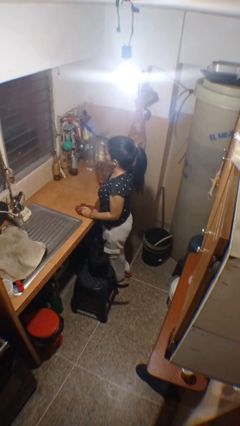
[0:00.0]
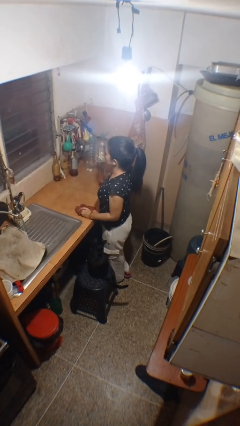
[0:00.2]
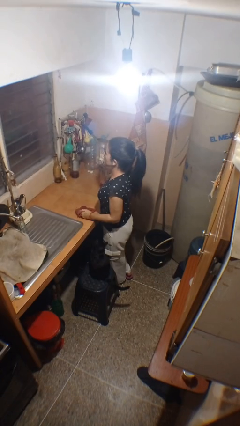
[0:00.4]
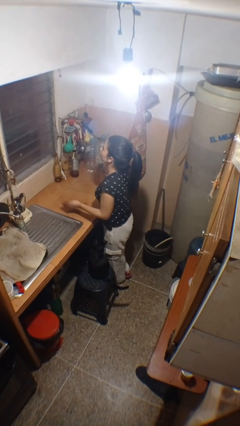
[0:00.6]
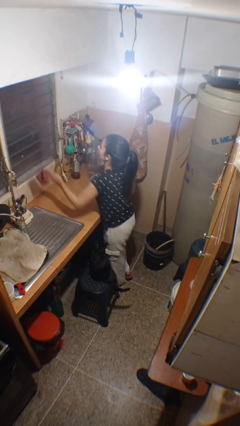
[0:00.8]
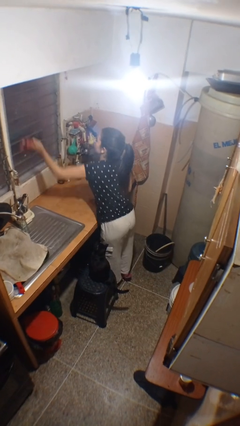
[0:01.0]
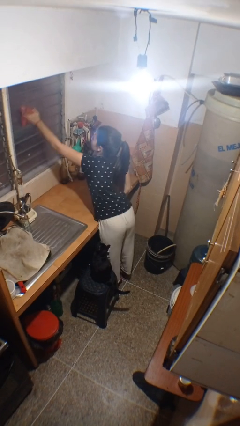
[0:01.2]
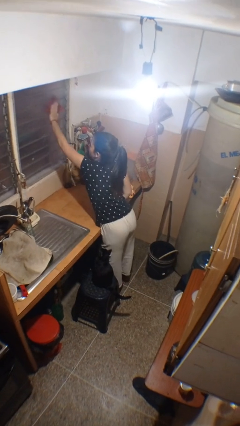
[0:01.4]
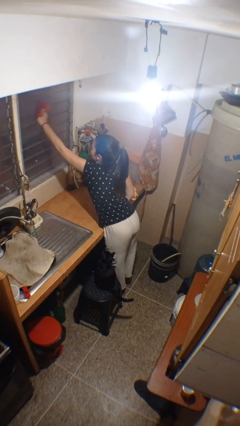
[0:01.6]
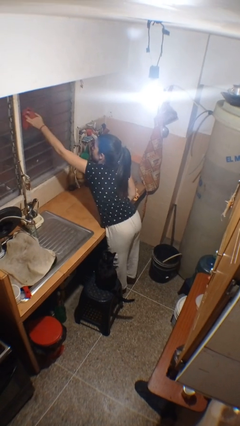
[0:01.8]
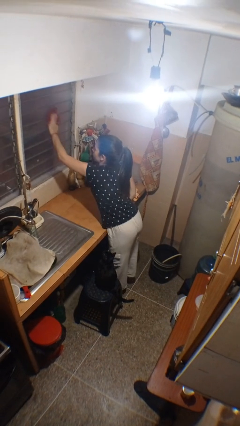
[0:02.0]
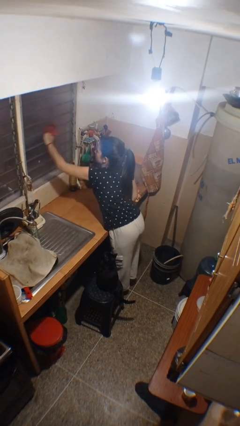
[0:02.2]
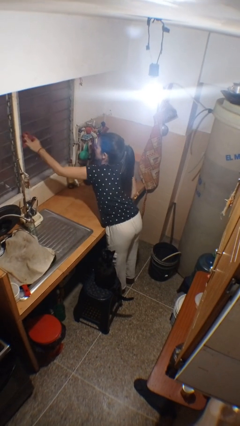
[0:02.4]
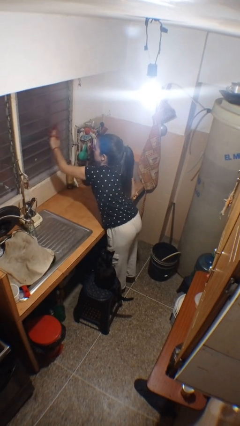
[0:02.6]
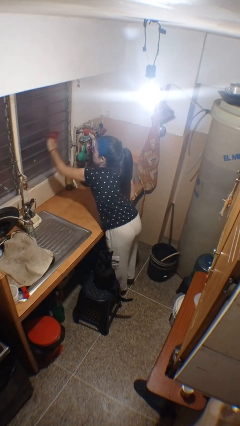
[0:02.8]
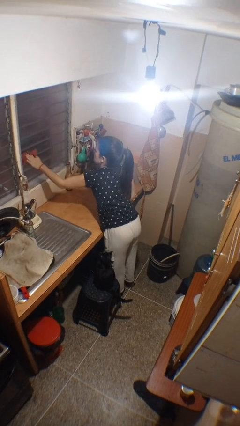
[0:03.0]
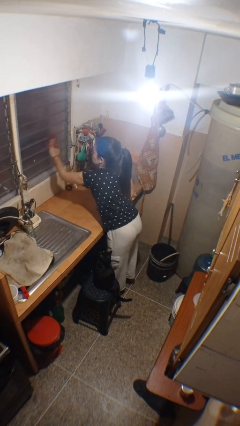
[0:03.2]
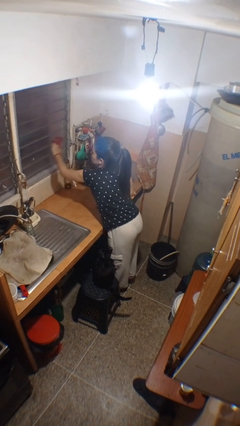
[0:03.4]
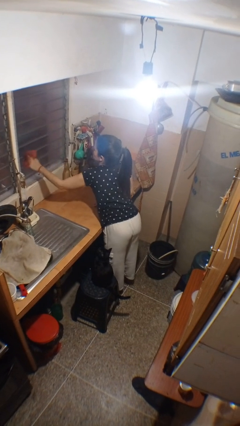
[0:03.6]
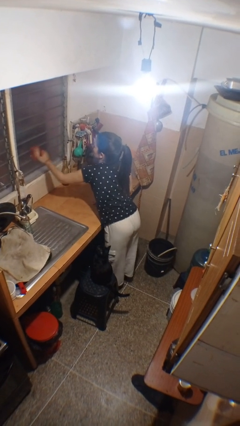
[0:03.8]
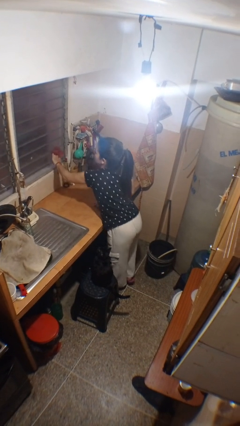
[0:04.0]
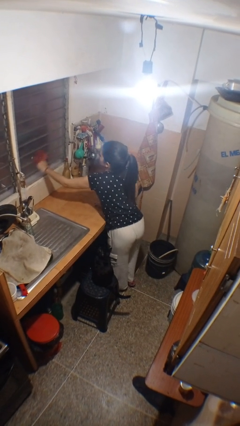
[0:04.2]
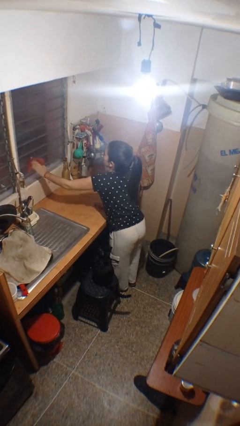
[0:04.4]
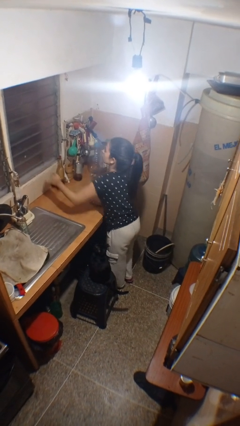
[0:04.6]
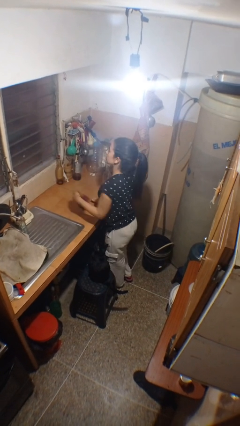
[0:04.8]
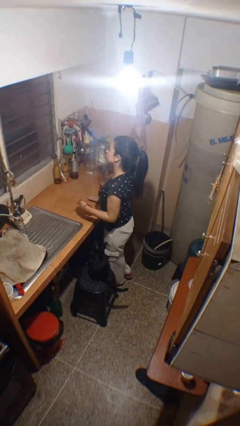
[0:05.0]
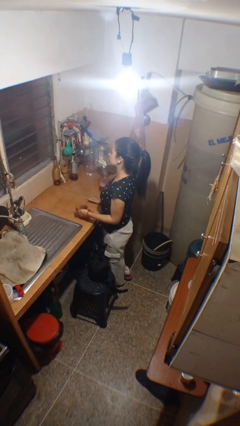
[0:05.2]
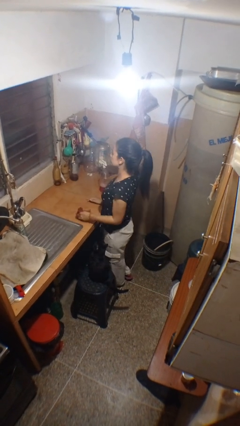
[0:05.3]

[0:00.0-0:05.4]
person washes window

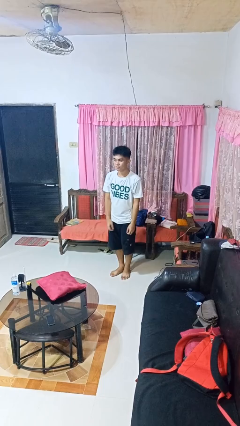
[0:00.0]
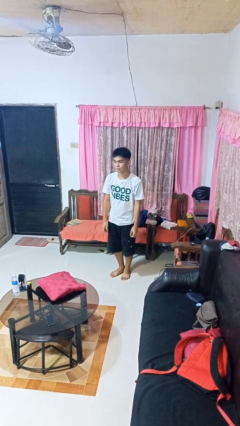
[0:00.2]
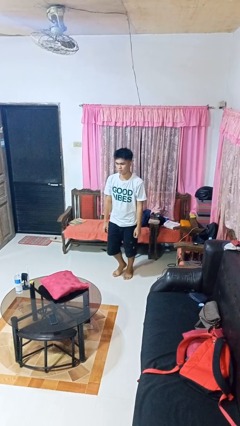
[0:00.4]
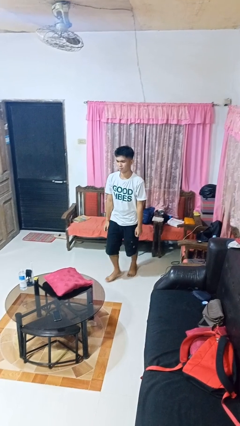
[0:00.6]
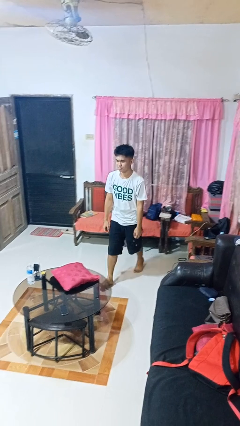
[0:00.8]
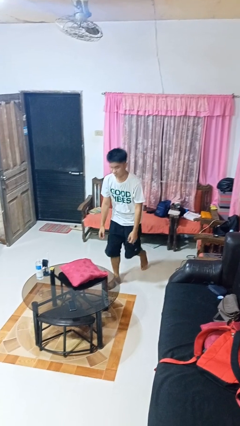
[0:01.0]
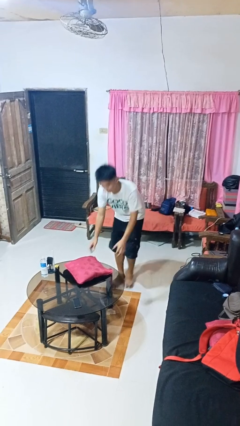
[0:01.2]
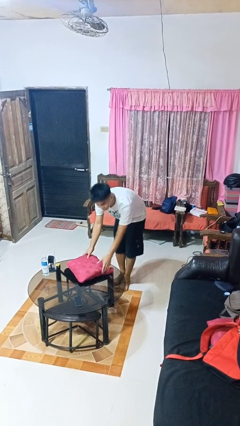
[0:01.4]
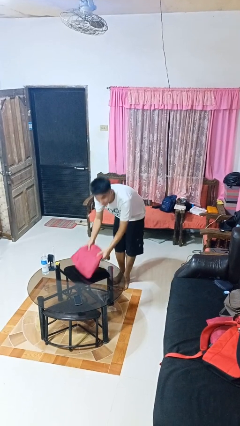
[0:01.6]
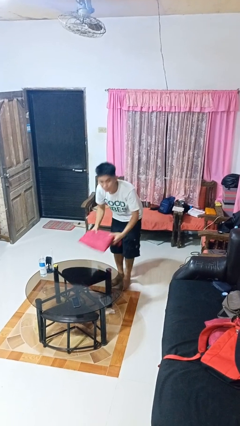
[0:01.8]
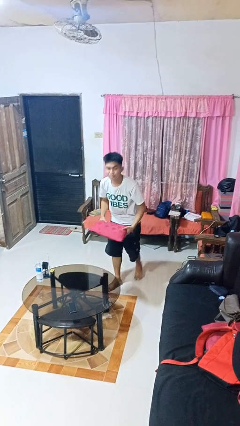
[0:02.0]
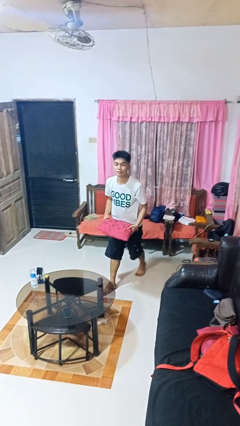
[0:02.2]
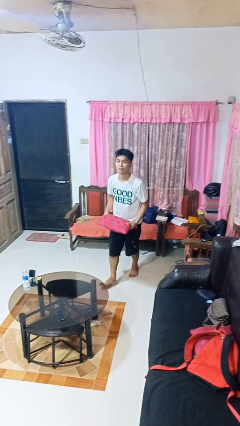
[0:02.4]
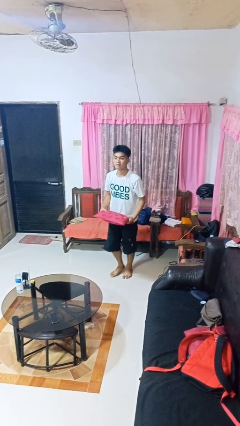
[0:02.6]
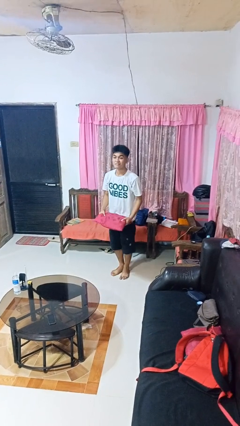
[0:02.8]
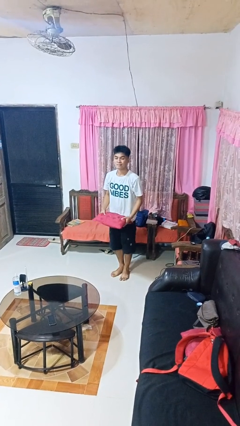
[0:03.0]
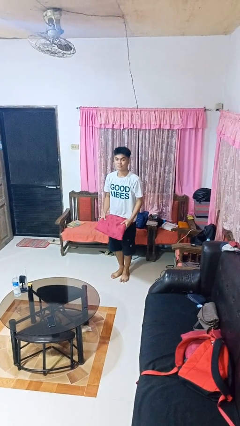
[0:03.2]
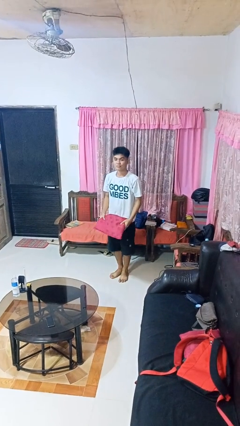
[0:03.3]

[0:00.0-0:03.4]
person picks up object from table

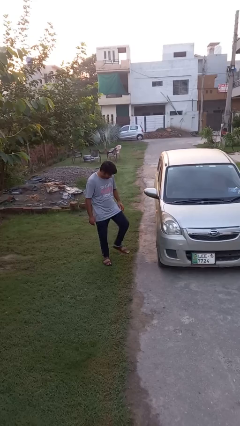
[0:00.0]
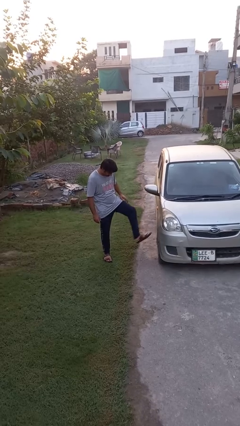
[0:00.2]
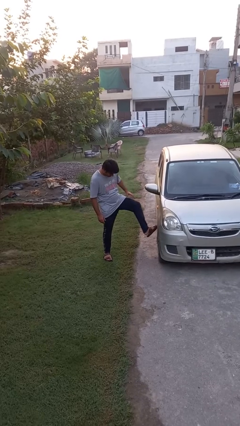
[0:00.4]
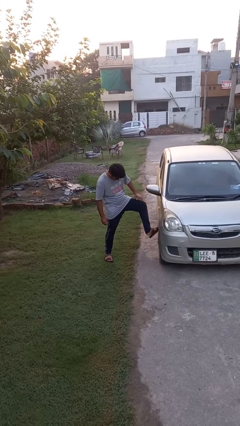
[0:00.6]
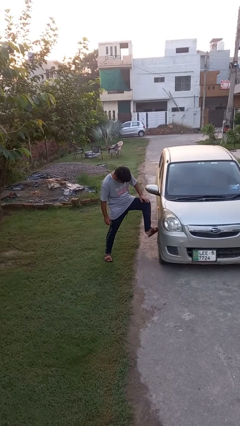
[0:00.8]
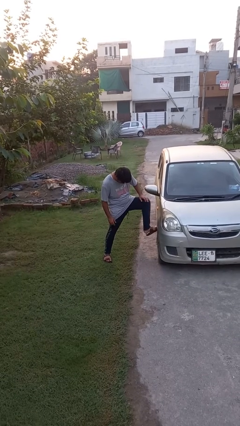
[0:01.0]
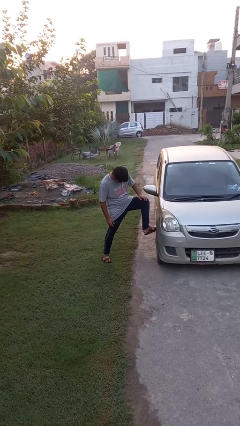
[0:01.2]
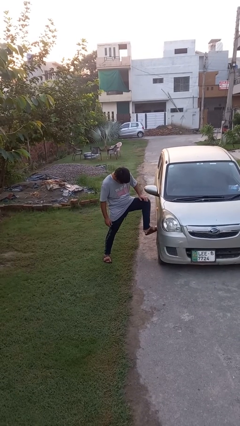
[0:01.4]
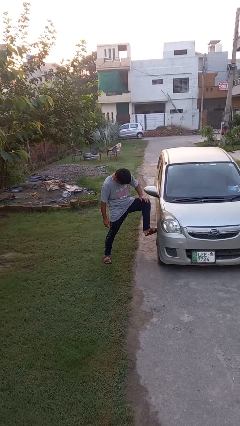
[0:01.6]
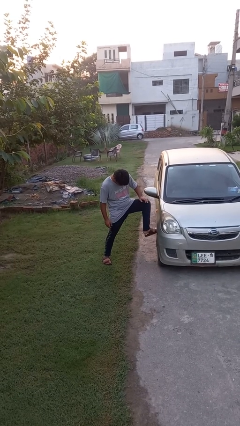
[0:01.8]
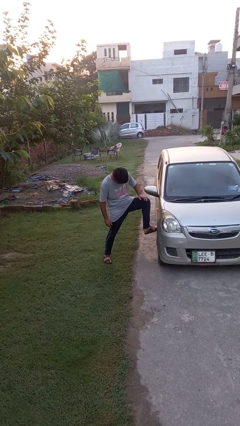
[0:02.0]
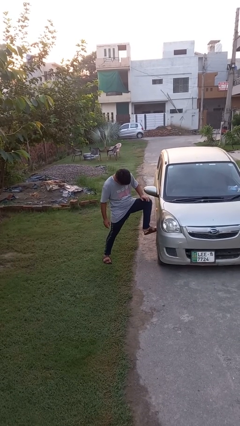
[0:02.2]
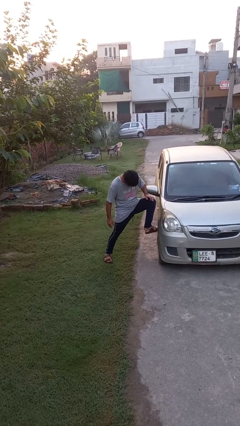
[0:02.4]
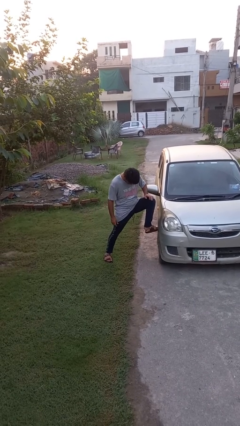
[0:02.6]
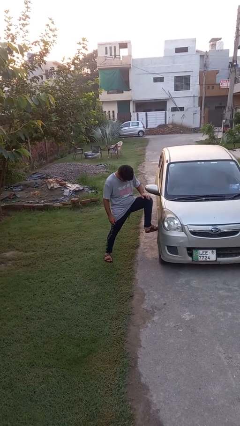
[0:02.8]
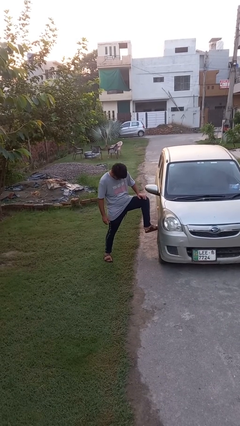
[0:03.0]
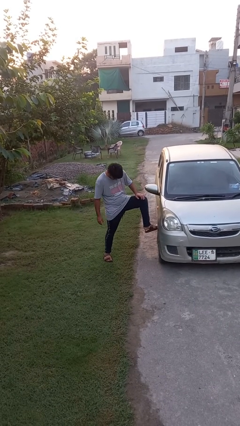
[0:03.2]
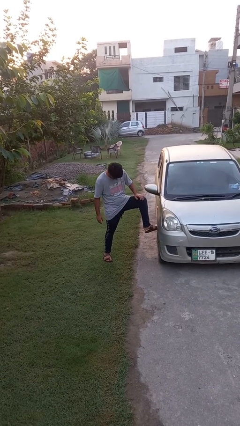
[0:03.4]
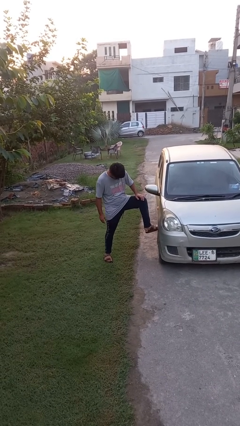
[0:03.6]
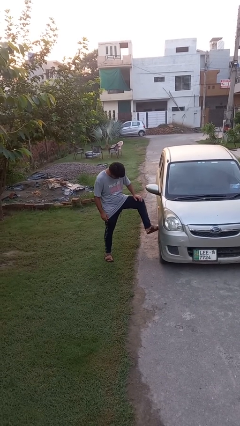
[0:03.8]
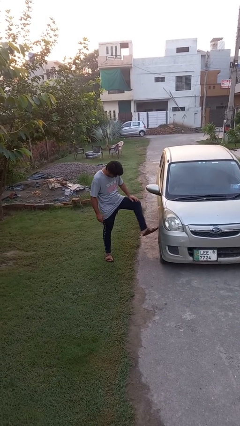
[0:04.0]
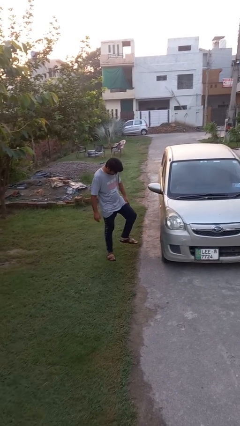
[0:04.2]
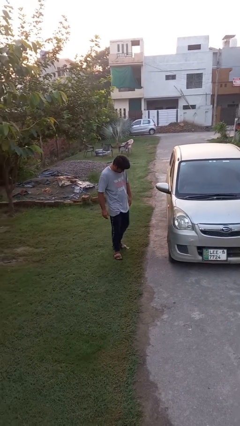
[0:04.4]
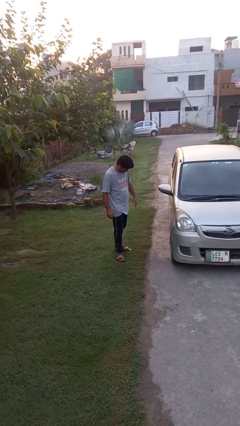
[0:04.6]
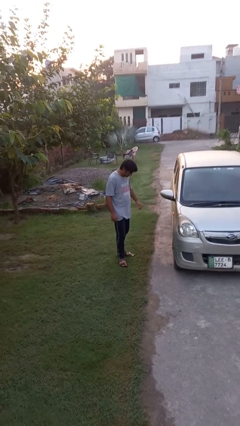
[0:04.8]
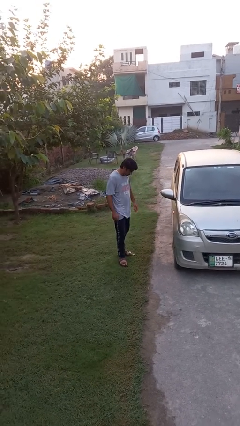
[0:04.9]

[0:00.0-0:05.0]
person kicks car tires

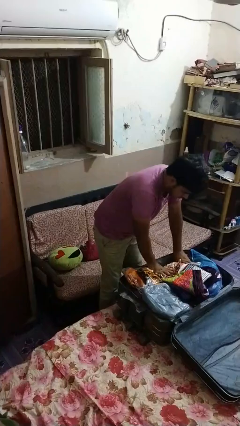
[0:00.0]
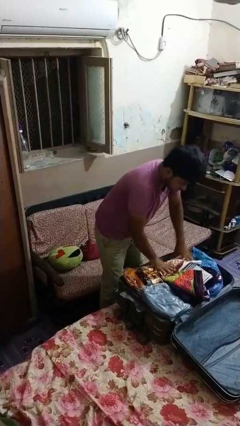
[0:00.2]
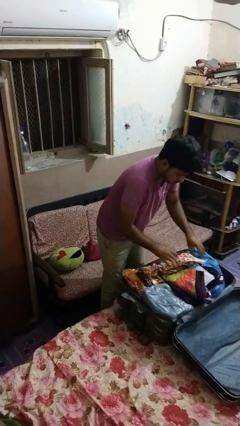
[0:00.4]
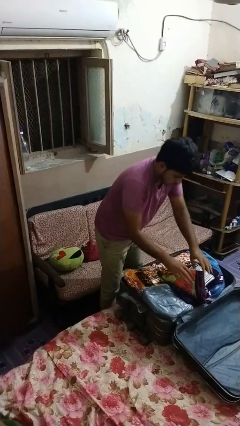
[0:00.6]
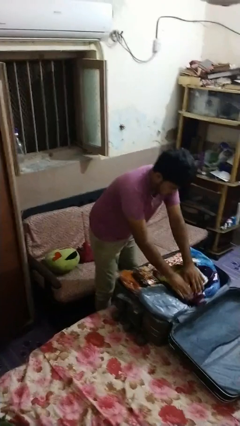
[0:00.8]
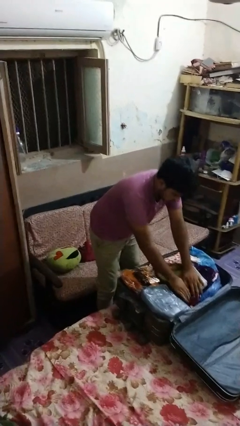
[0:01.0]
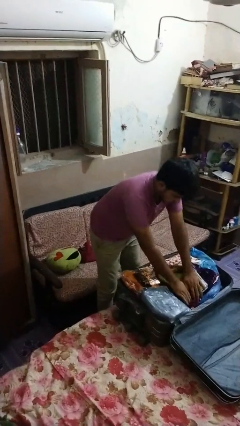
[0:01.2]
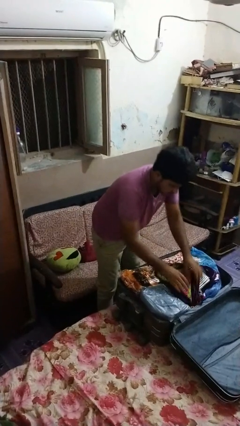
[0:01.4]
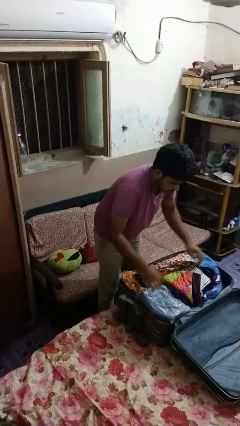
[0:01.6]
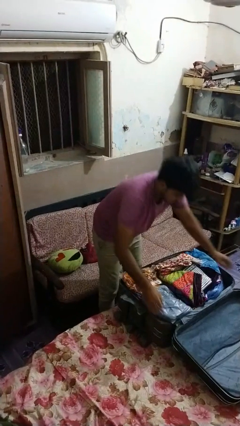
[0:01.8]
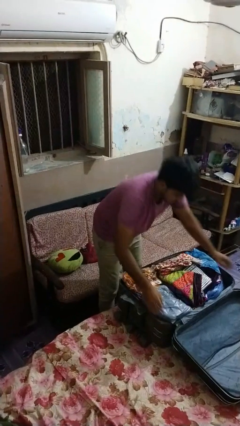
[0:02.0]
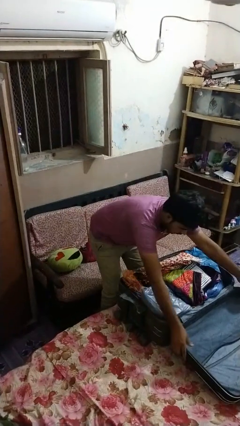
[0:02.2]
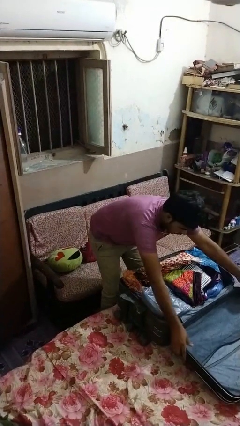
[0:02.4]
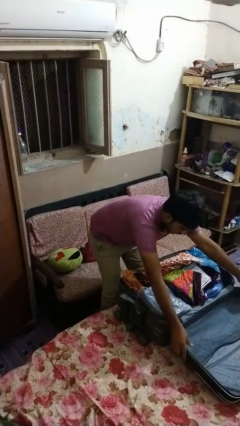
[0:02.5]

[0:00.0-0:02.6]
person loads clothes into suitcase

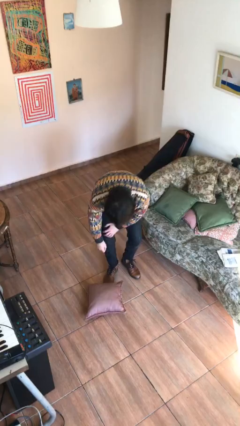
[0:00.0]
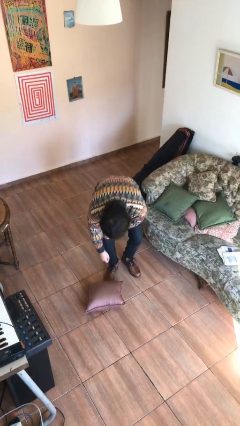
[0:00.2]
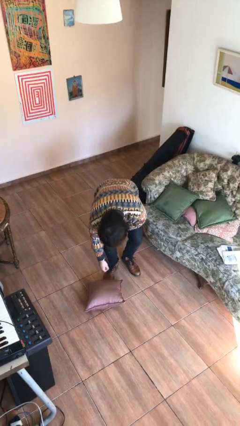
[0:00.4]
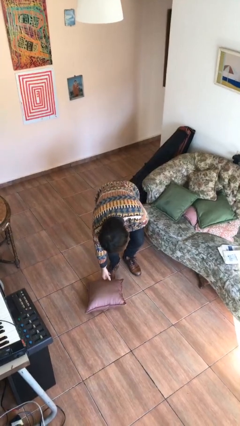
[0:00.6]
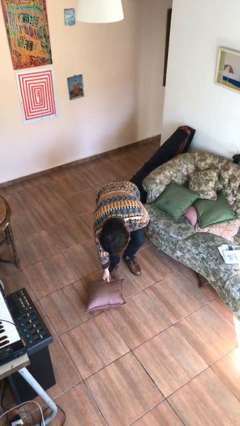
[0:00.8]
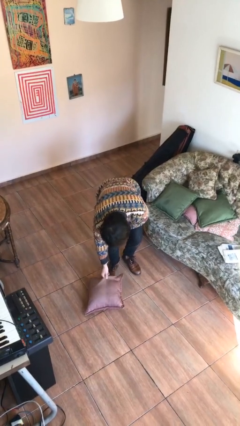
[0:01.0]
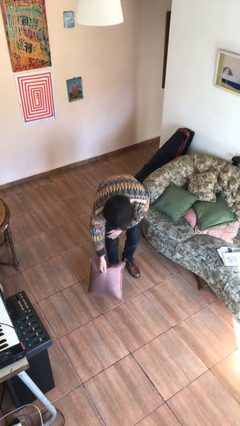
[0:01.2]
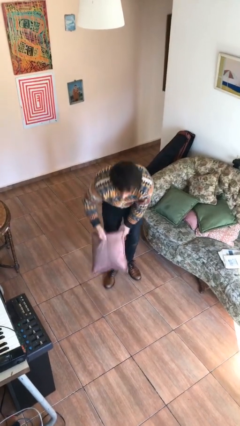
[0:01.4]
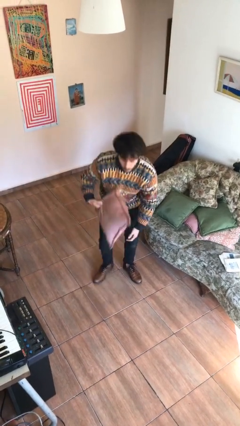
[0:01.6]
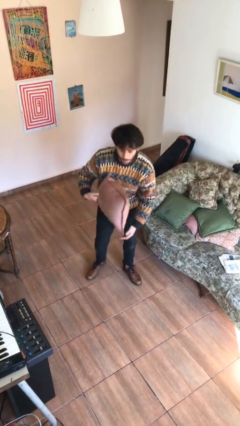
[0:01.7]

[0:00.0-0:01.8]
person picks up object from floor
